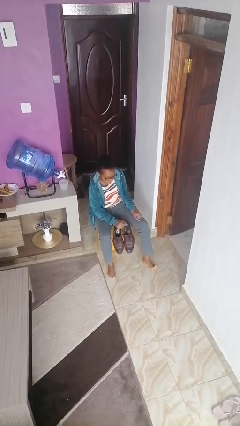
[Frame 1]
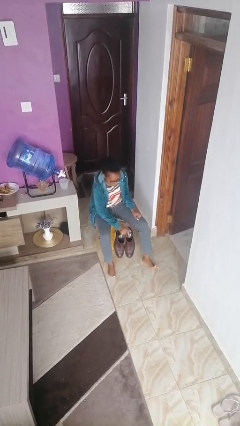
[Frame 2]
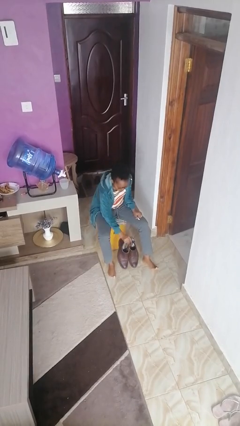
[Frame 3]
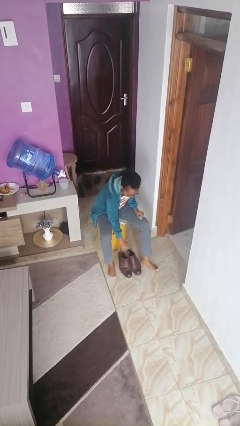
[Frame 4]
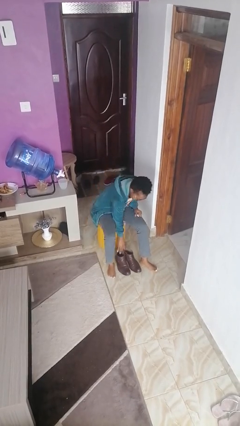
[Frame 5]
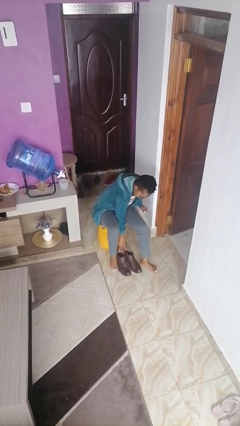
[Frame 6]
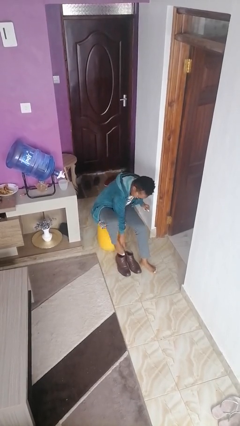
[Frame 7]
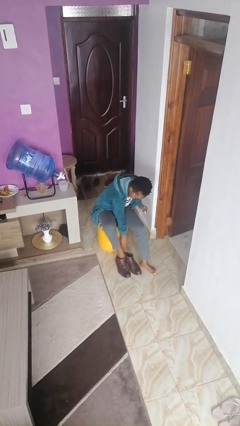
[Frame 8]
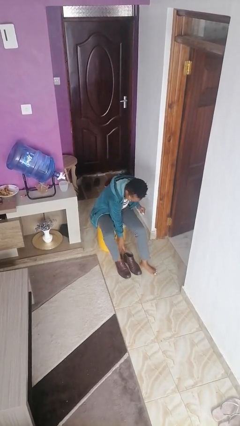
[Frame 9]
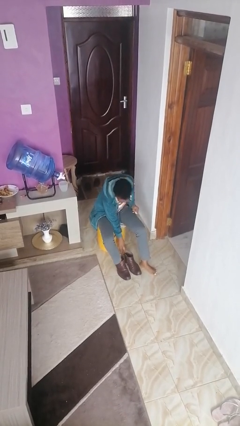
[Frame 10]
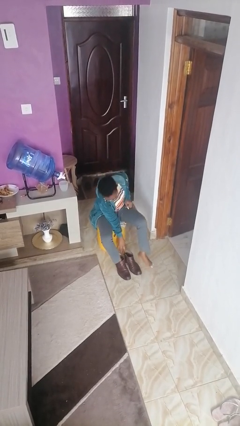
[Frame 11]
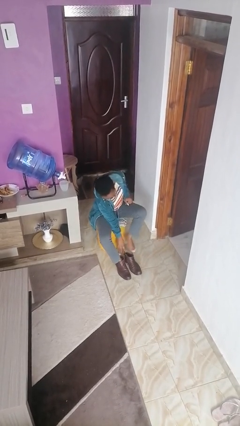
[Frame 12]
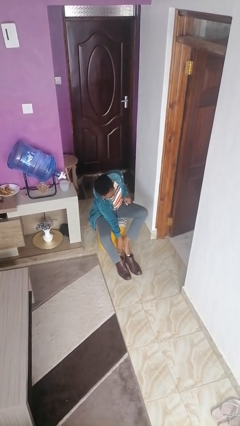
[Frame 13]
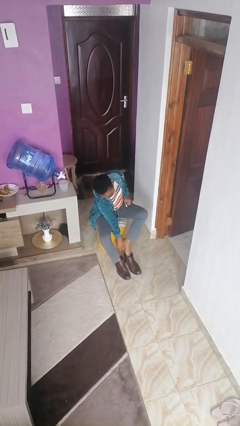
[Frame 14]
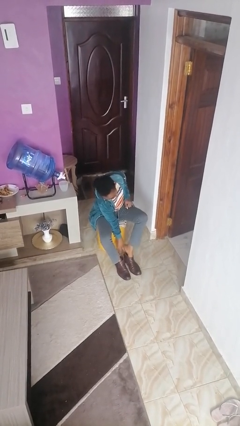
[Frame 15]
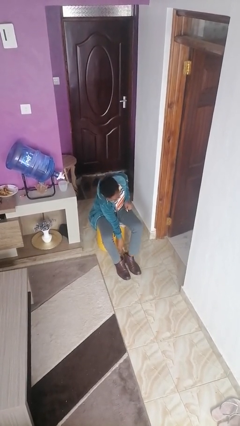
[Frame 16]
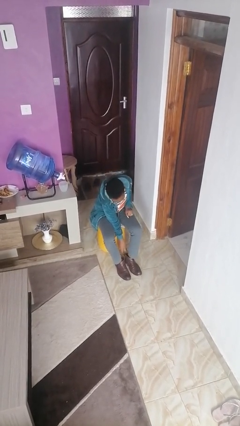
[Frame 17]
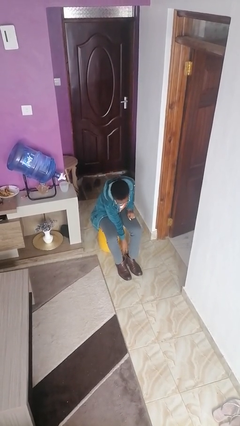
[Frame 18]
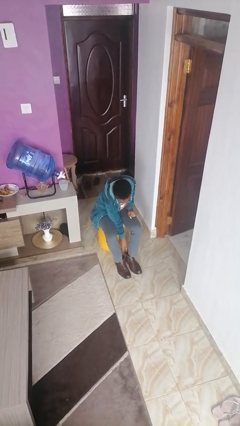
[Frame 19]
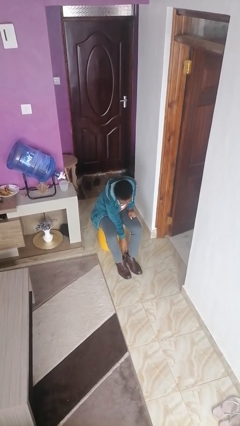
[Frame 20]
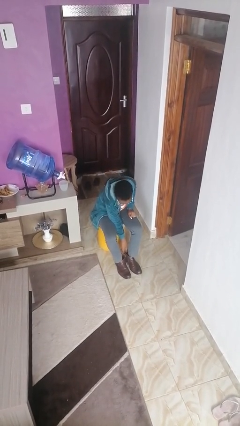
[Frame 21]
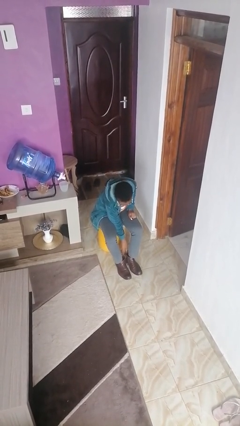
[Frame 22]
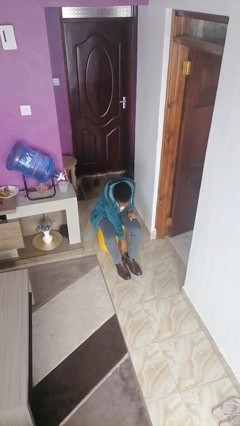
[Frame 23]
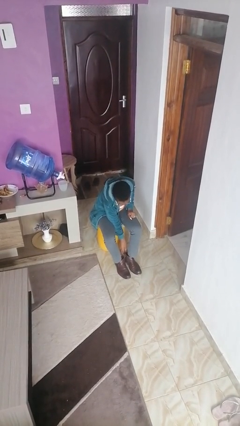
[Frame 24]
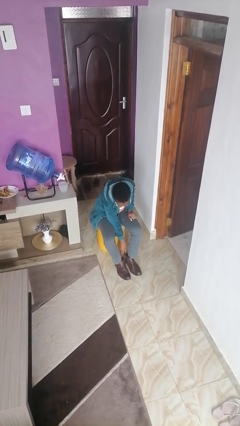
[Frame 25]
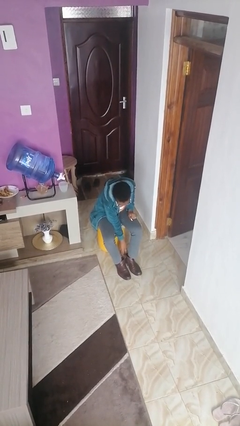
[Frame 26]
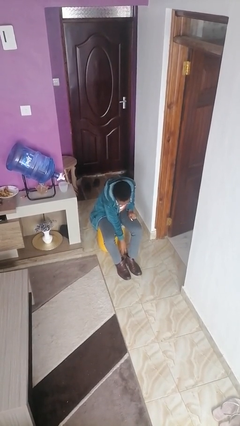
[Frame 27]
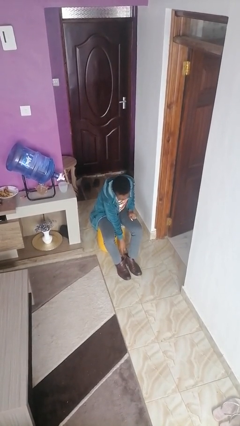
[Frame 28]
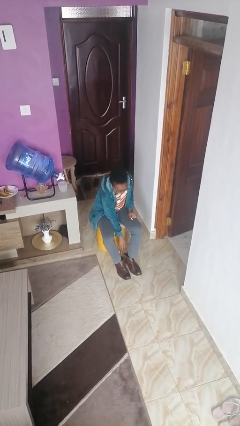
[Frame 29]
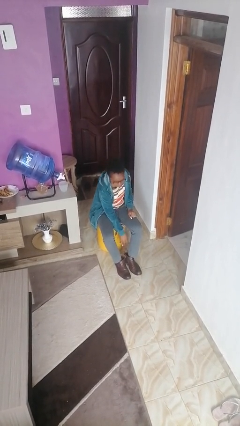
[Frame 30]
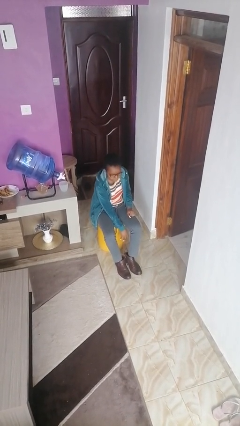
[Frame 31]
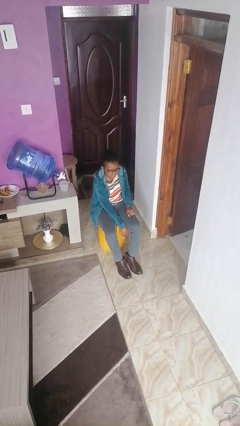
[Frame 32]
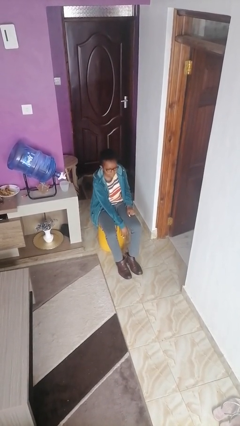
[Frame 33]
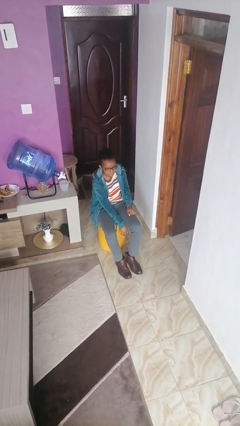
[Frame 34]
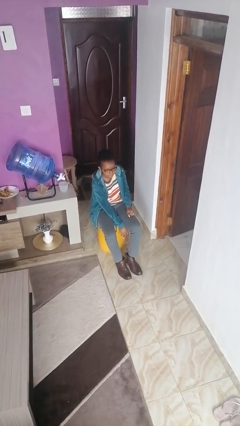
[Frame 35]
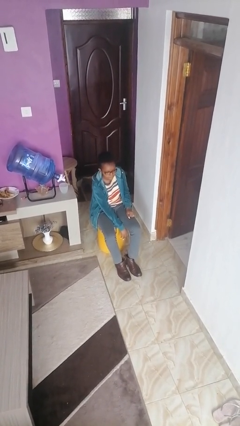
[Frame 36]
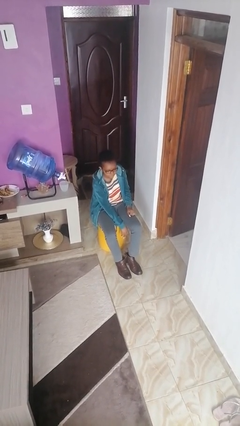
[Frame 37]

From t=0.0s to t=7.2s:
person puts on boots

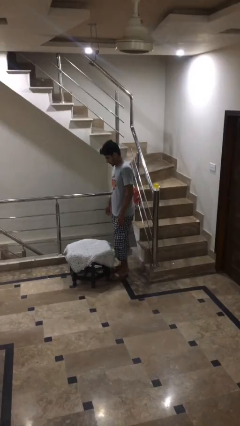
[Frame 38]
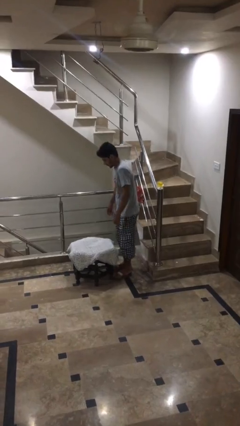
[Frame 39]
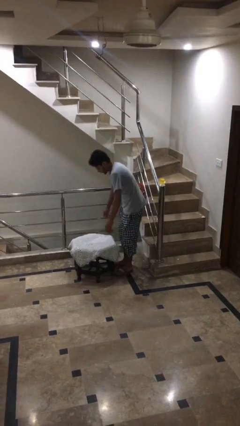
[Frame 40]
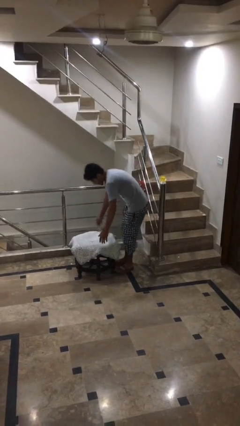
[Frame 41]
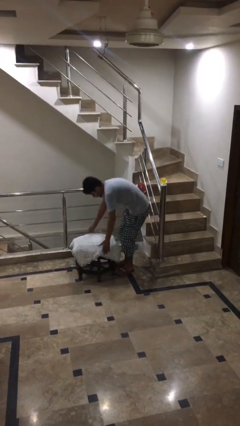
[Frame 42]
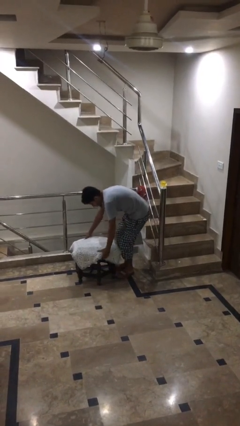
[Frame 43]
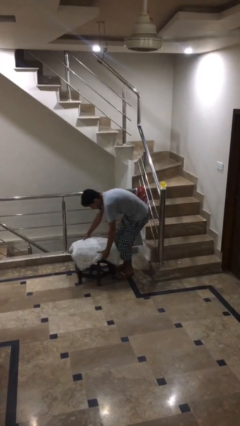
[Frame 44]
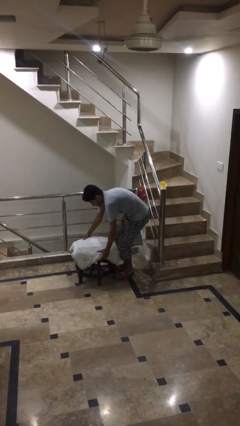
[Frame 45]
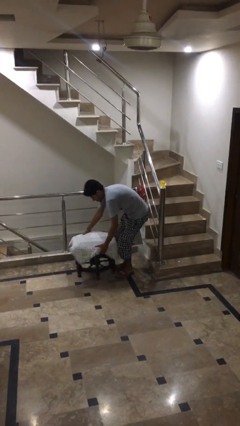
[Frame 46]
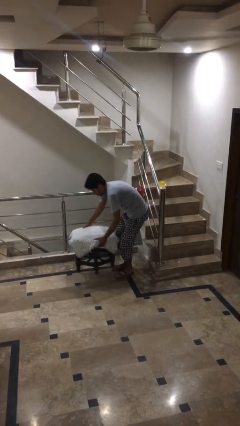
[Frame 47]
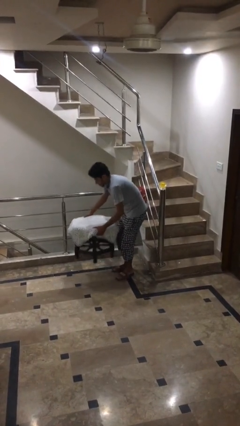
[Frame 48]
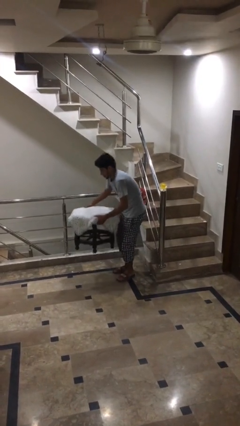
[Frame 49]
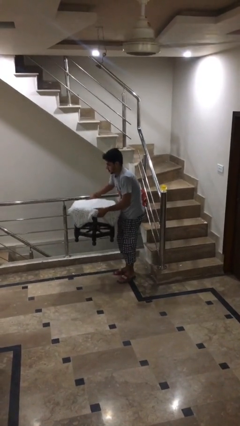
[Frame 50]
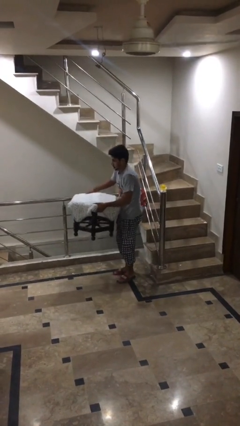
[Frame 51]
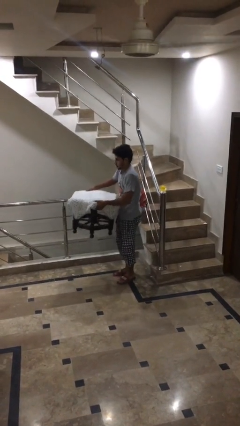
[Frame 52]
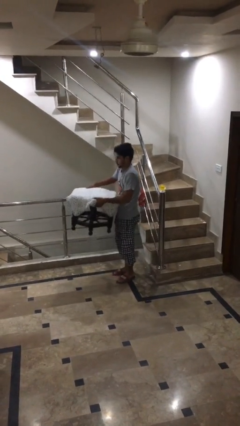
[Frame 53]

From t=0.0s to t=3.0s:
person picks up object from floor

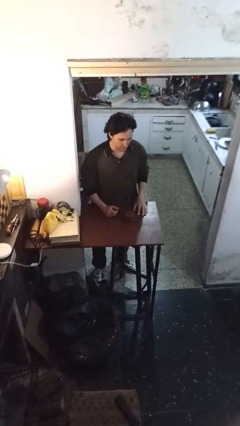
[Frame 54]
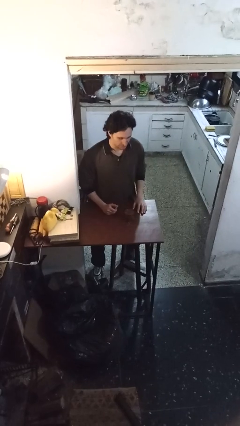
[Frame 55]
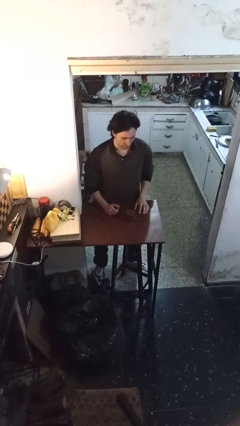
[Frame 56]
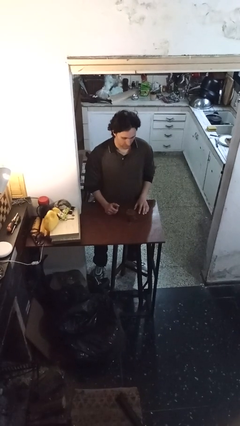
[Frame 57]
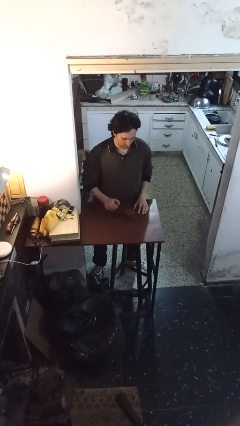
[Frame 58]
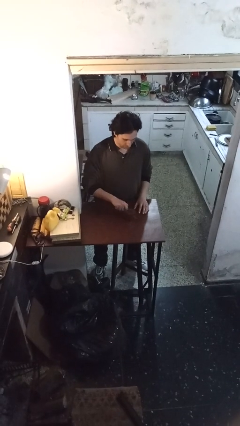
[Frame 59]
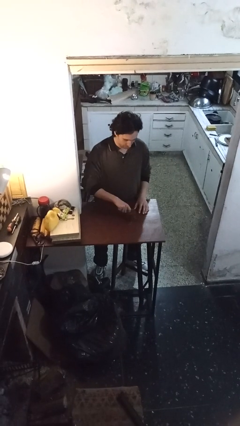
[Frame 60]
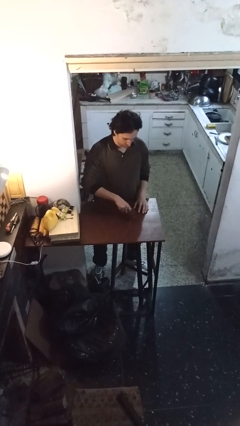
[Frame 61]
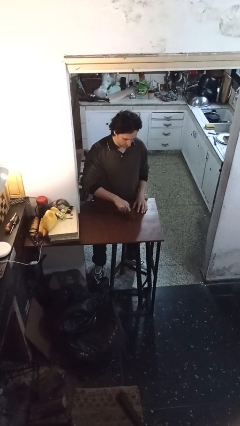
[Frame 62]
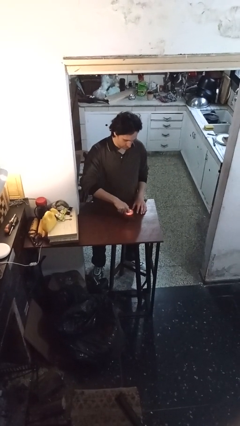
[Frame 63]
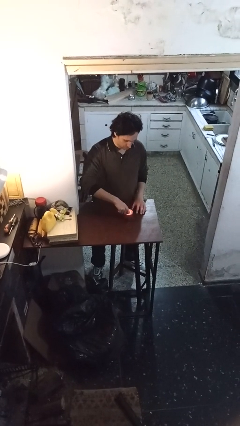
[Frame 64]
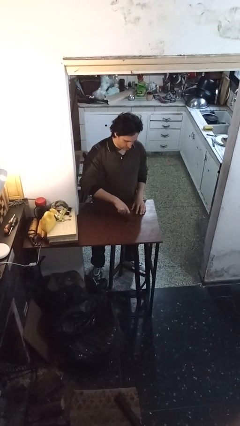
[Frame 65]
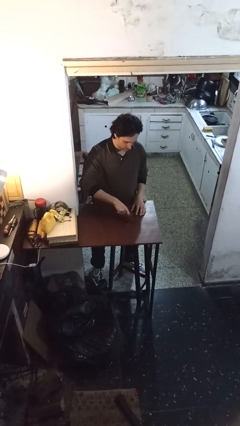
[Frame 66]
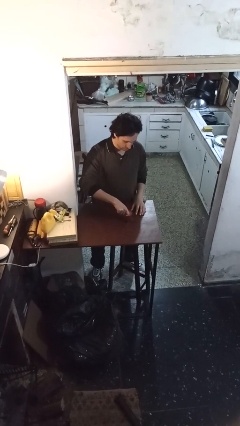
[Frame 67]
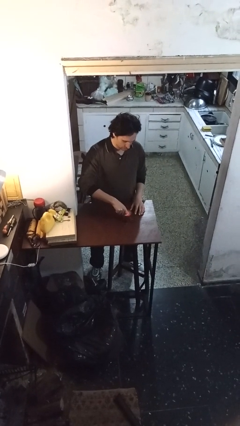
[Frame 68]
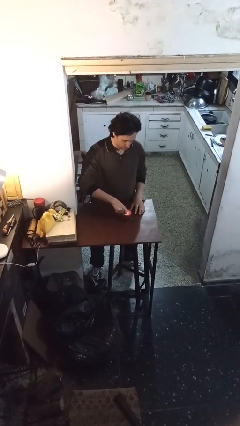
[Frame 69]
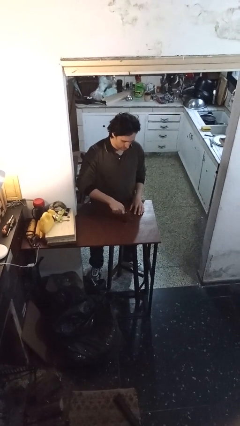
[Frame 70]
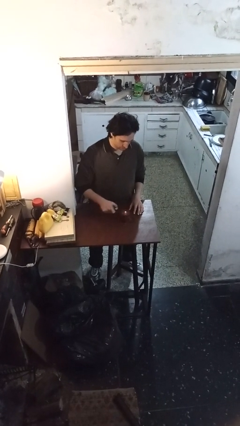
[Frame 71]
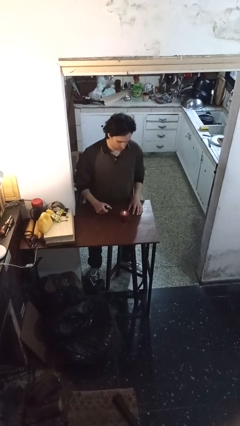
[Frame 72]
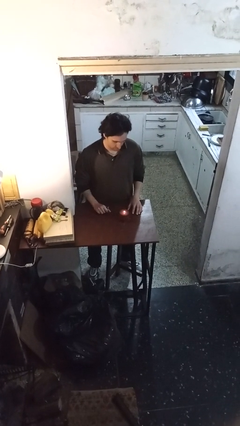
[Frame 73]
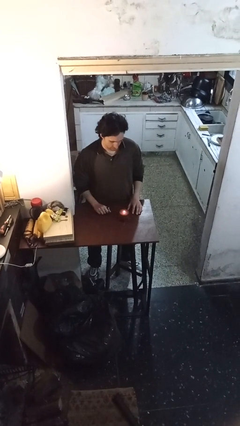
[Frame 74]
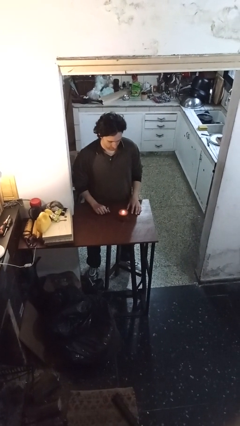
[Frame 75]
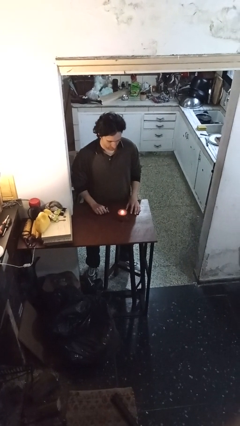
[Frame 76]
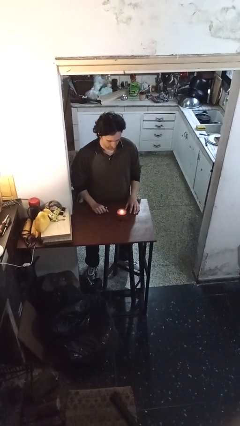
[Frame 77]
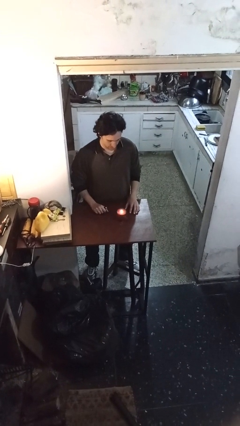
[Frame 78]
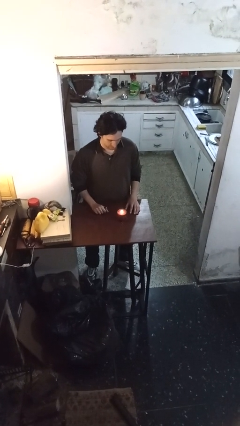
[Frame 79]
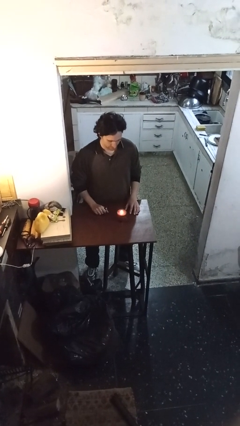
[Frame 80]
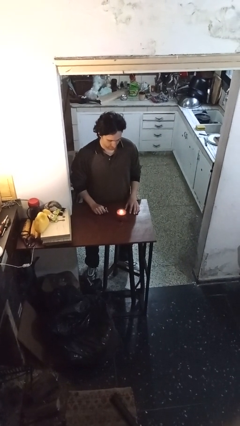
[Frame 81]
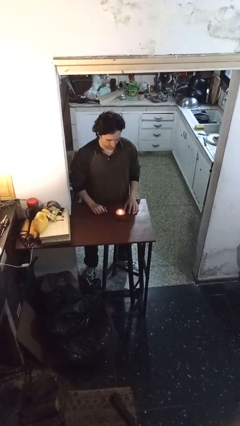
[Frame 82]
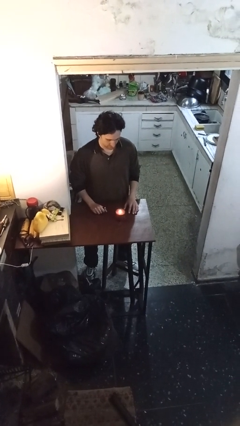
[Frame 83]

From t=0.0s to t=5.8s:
person lights candle

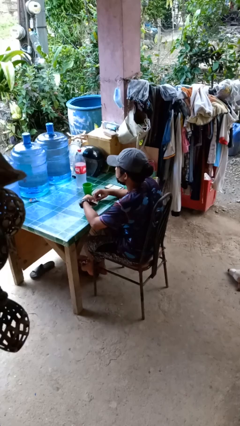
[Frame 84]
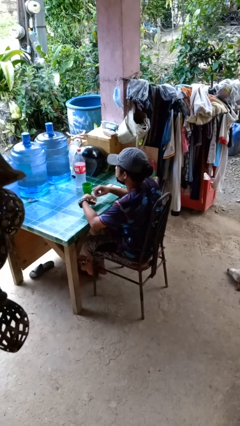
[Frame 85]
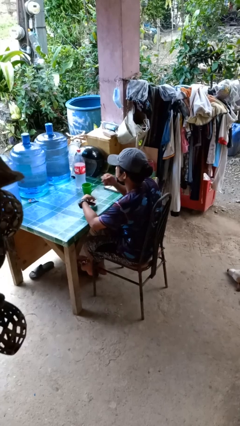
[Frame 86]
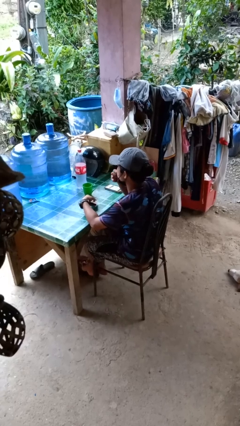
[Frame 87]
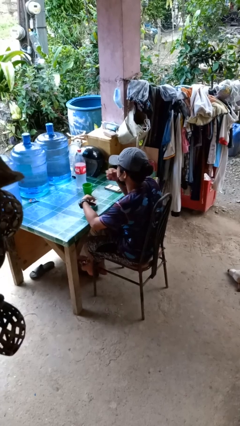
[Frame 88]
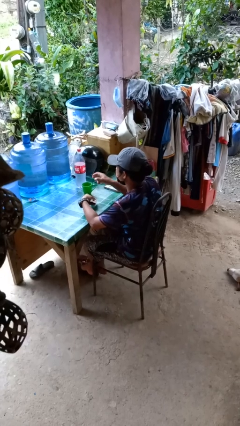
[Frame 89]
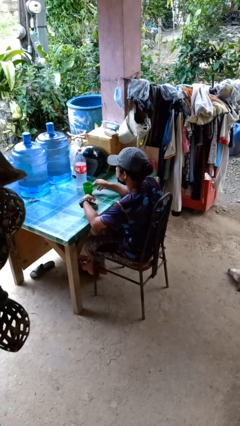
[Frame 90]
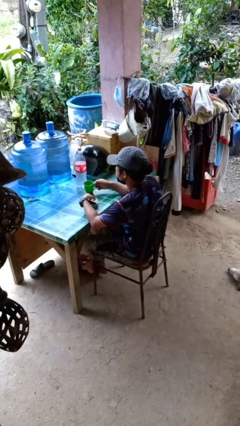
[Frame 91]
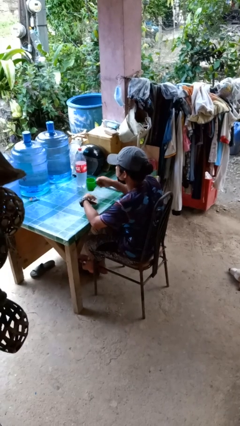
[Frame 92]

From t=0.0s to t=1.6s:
person takes medicine pills
